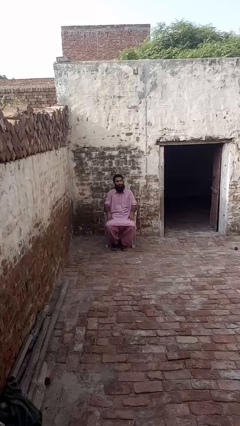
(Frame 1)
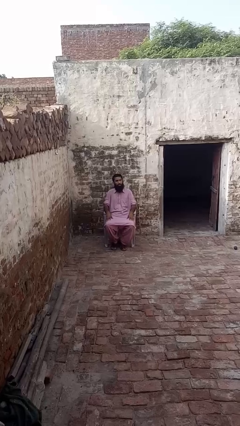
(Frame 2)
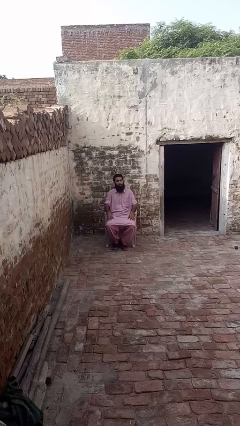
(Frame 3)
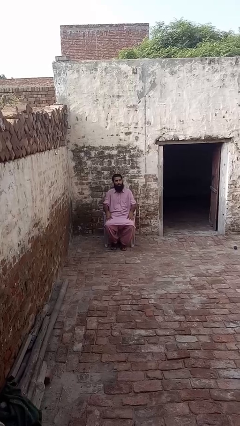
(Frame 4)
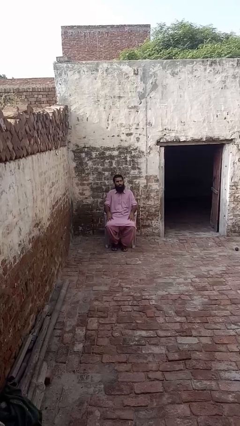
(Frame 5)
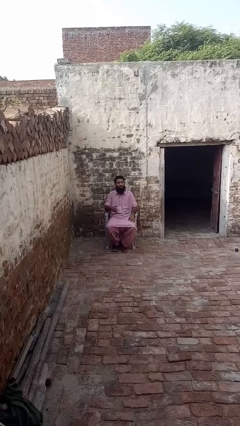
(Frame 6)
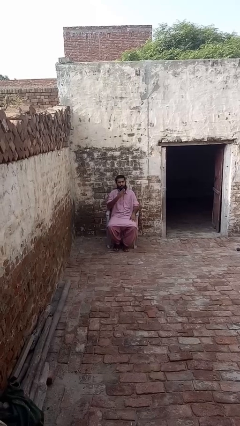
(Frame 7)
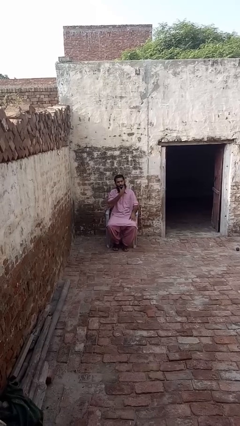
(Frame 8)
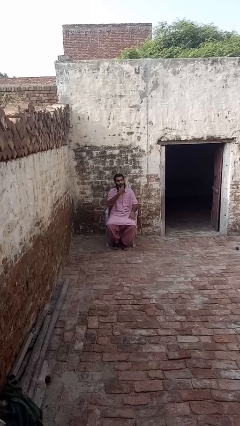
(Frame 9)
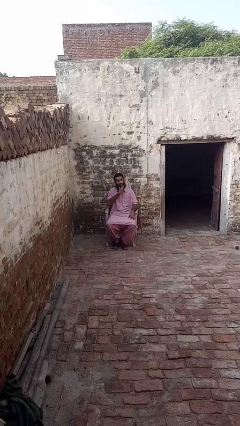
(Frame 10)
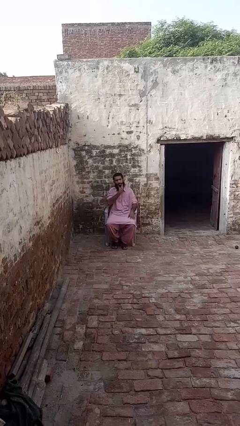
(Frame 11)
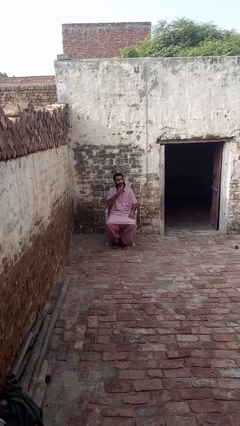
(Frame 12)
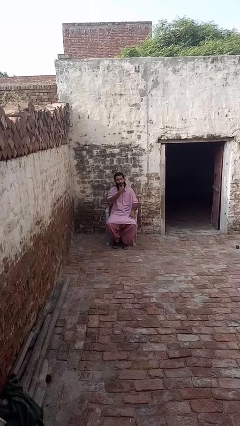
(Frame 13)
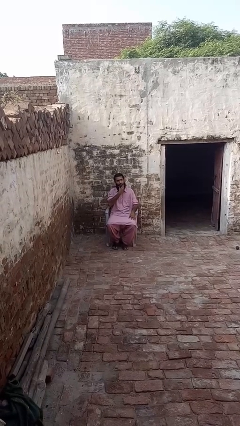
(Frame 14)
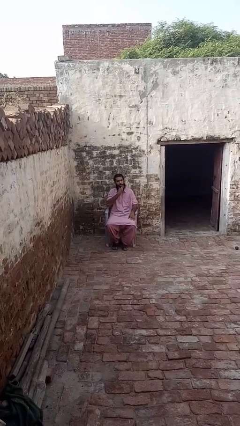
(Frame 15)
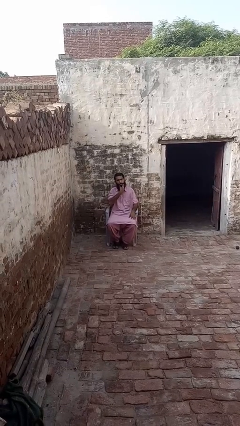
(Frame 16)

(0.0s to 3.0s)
person strokes chin

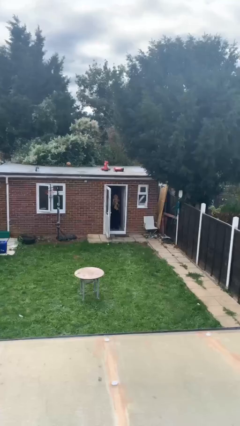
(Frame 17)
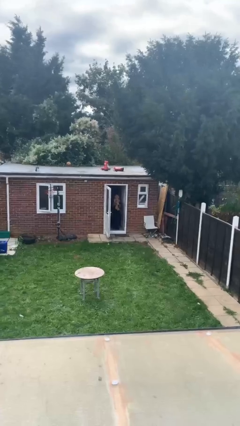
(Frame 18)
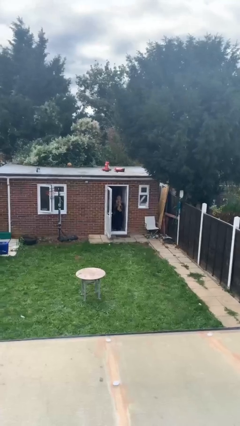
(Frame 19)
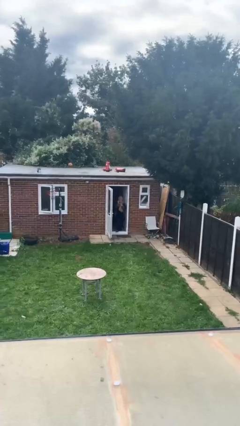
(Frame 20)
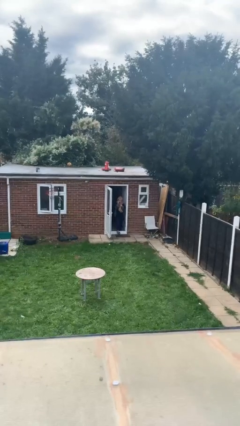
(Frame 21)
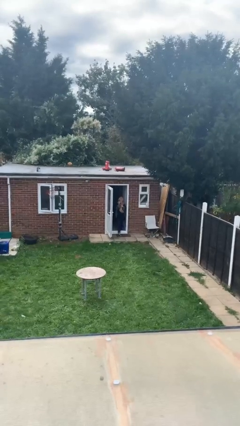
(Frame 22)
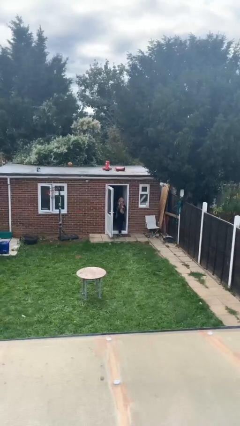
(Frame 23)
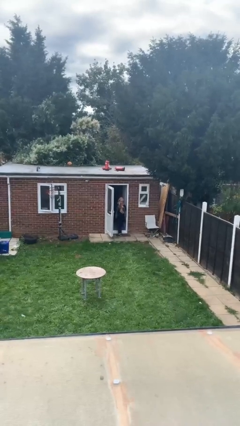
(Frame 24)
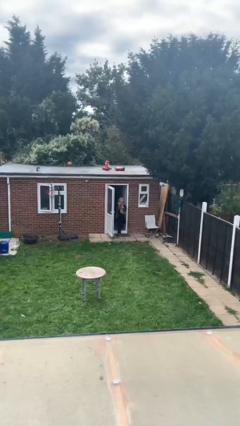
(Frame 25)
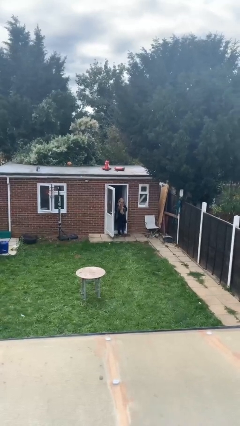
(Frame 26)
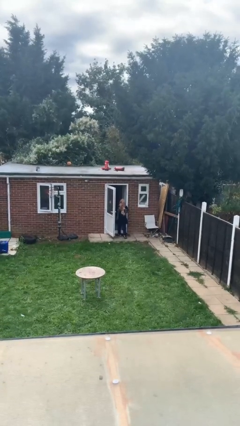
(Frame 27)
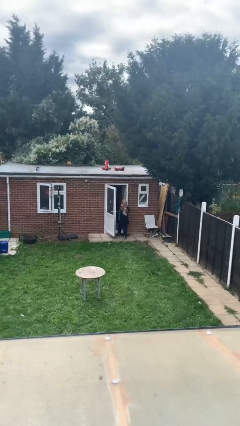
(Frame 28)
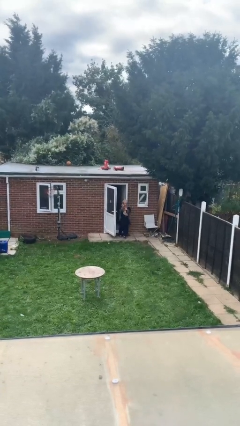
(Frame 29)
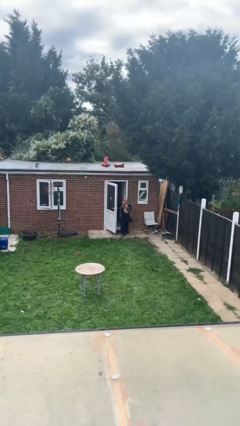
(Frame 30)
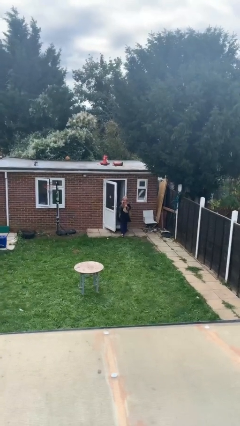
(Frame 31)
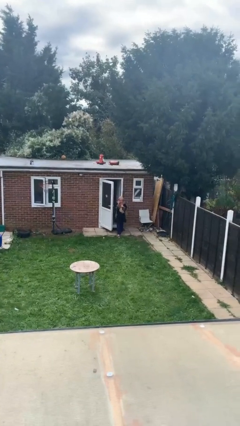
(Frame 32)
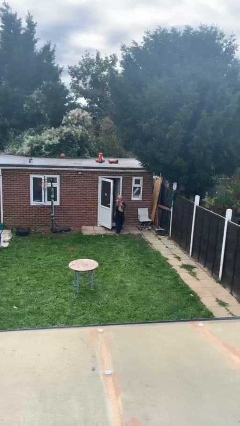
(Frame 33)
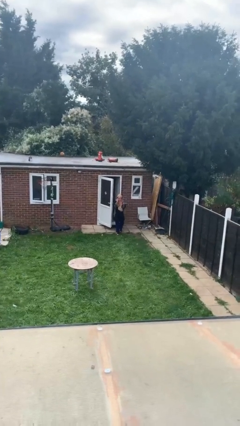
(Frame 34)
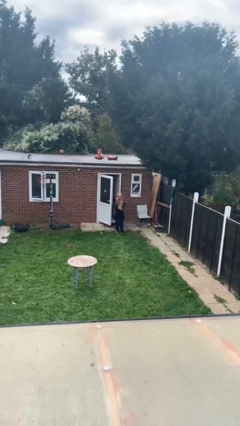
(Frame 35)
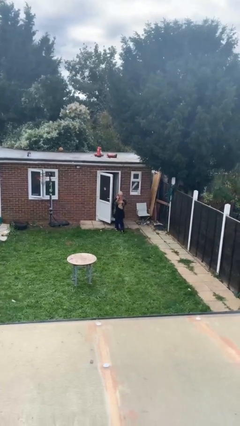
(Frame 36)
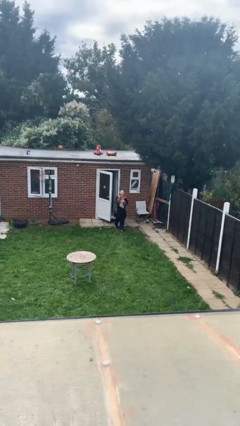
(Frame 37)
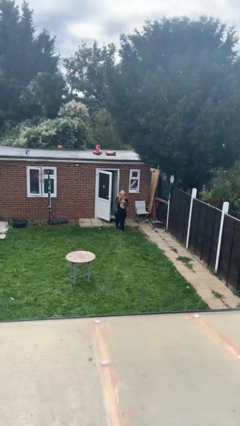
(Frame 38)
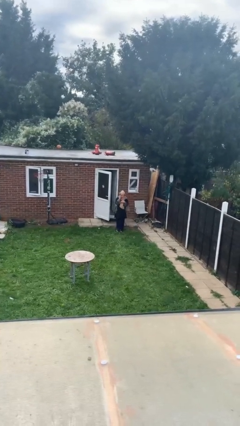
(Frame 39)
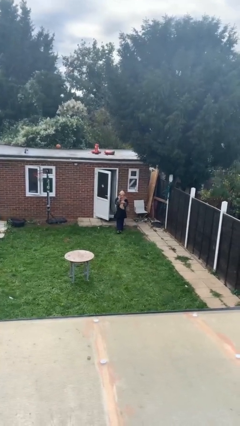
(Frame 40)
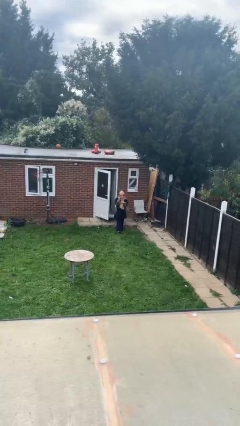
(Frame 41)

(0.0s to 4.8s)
person enters scene through structure

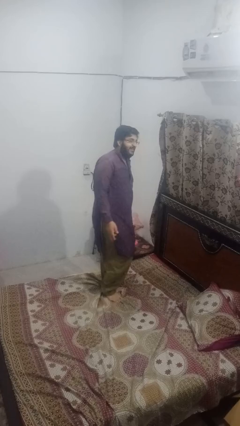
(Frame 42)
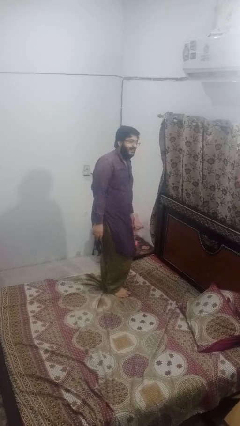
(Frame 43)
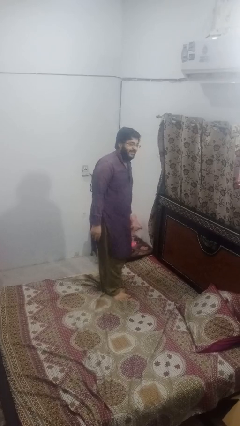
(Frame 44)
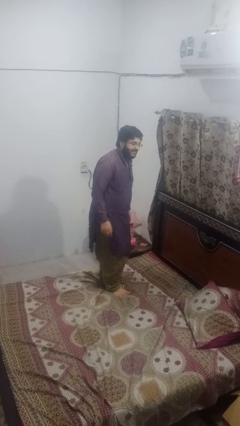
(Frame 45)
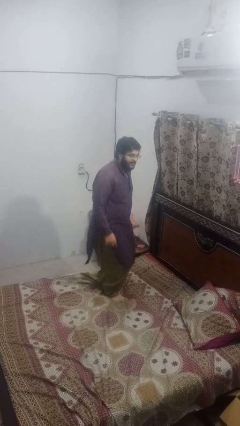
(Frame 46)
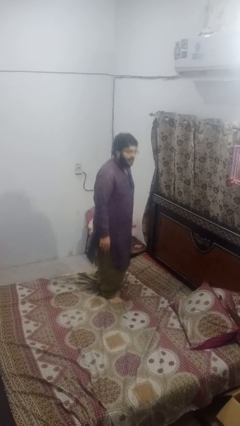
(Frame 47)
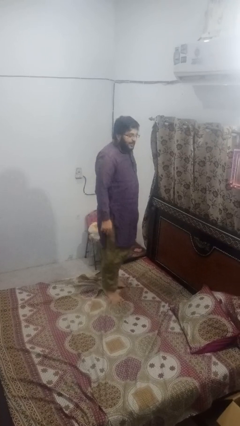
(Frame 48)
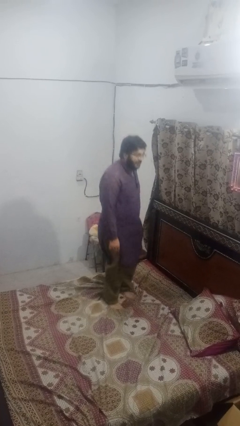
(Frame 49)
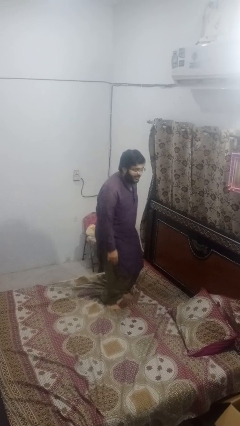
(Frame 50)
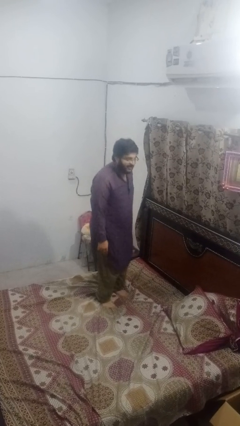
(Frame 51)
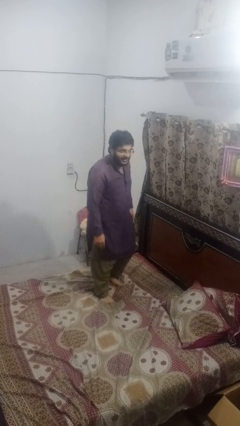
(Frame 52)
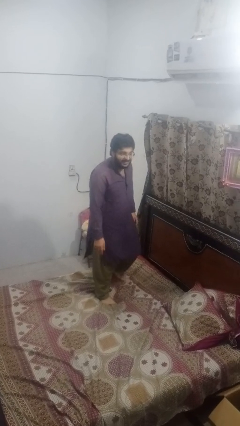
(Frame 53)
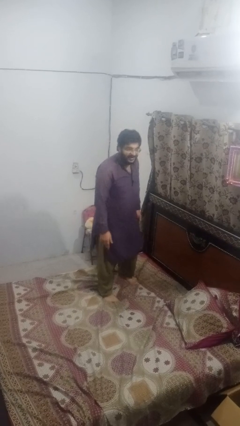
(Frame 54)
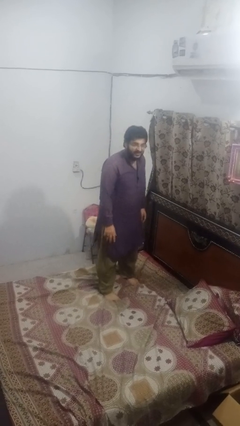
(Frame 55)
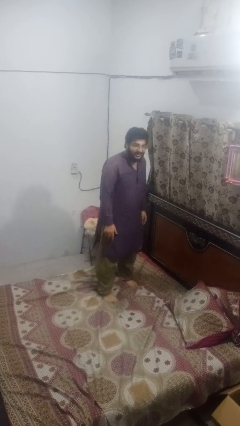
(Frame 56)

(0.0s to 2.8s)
person jumps on bed

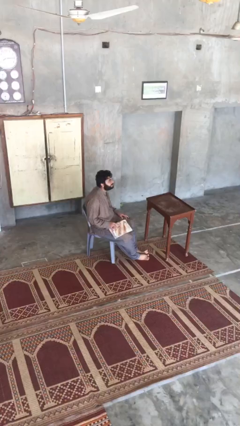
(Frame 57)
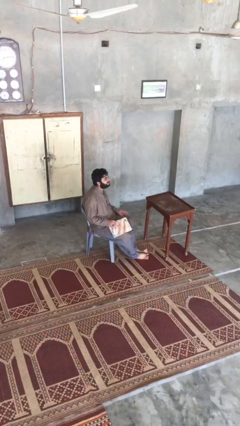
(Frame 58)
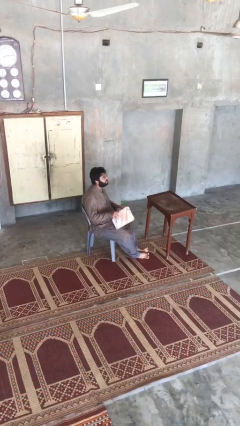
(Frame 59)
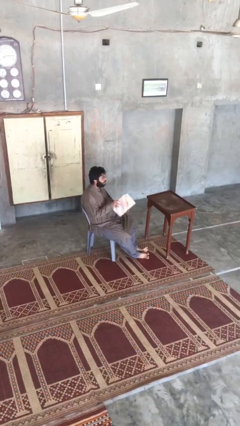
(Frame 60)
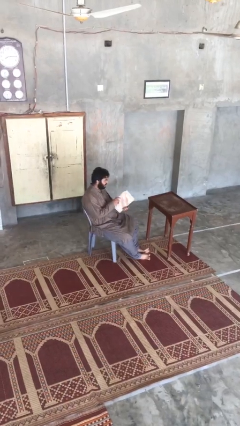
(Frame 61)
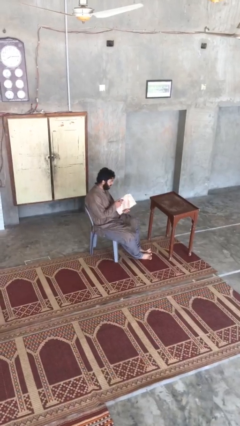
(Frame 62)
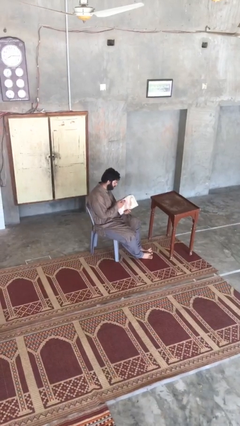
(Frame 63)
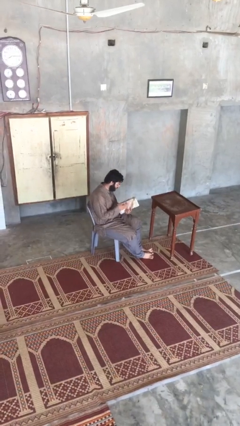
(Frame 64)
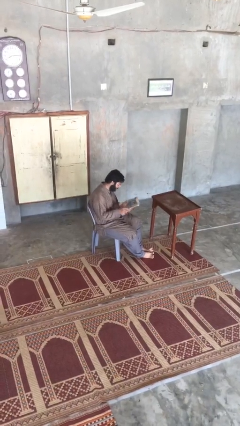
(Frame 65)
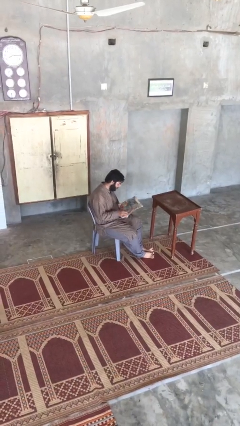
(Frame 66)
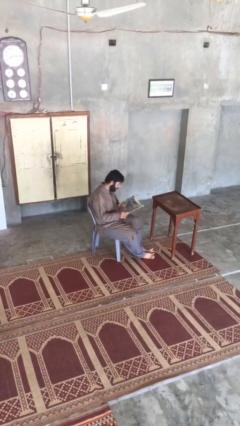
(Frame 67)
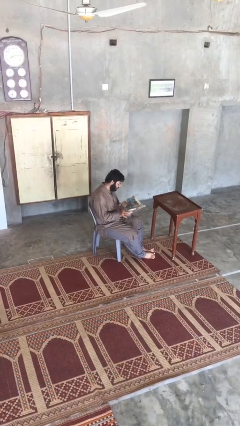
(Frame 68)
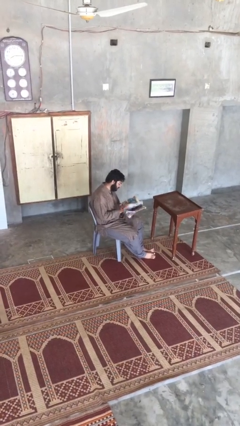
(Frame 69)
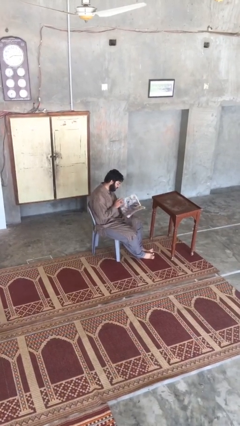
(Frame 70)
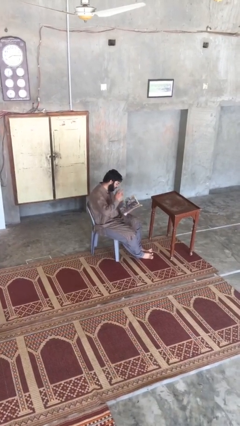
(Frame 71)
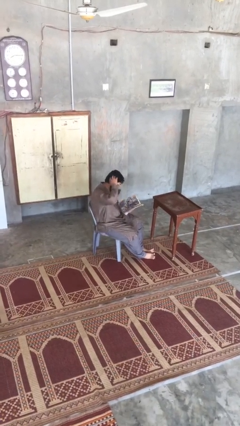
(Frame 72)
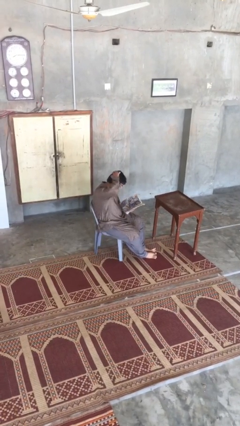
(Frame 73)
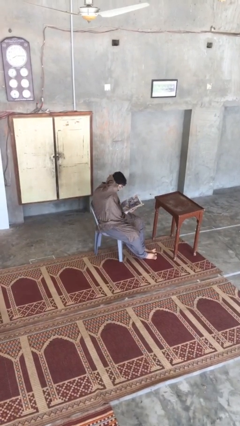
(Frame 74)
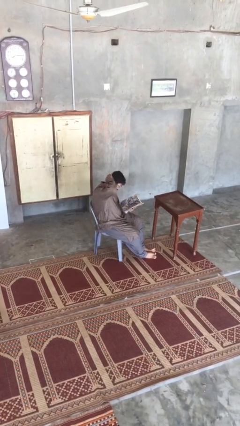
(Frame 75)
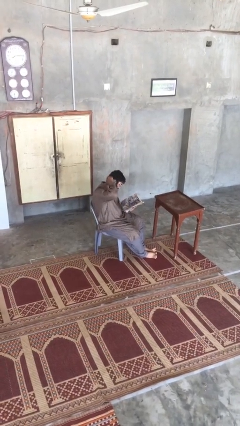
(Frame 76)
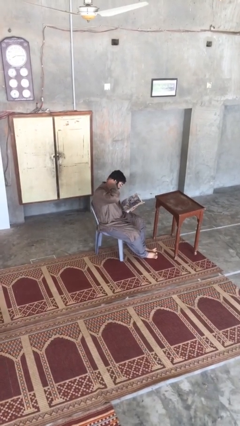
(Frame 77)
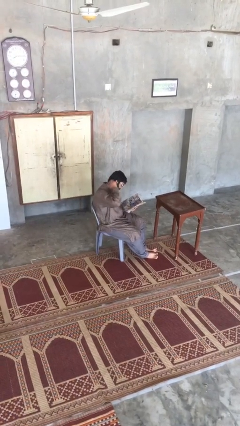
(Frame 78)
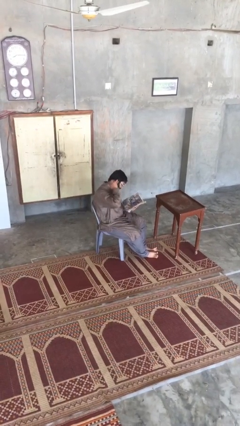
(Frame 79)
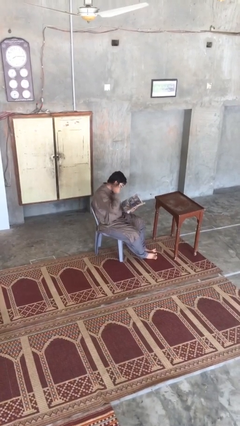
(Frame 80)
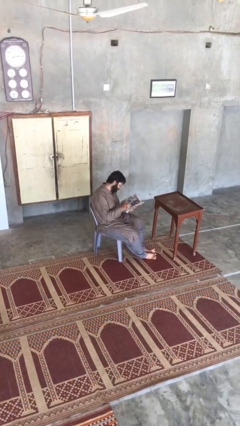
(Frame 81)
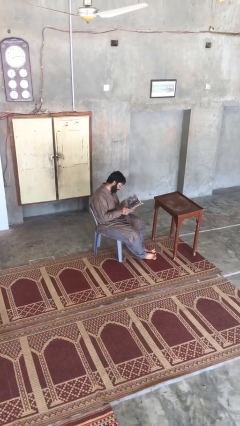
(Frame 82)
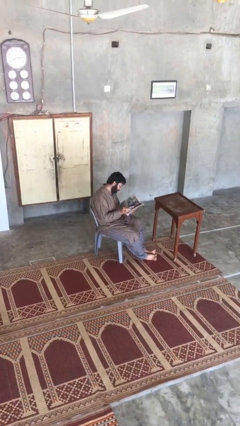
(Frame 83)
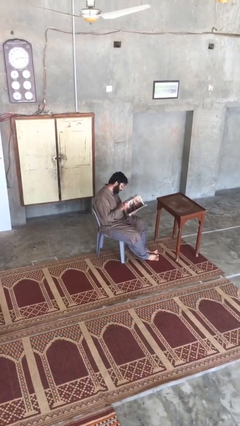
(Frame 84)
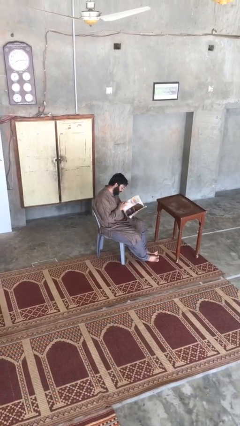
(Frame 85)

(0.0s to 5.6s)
person reads document

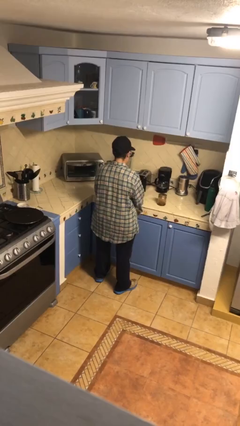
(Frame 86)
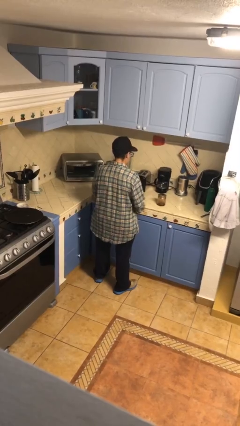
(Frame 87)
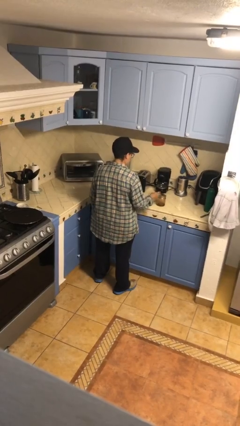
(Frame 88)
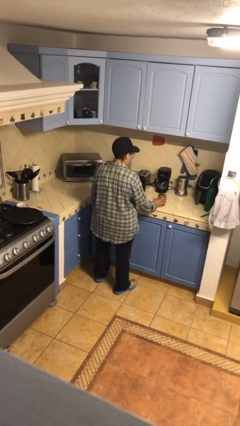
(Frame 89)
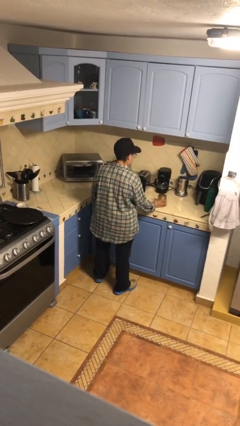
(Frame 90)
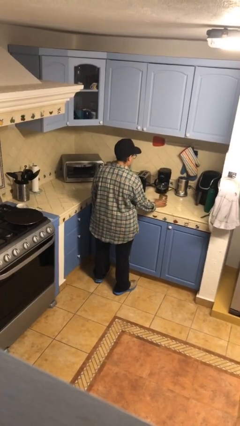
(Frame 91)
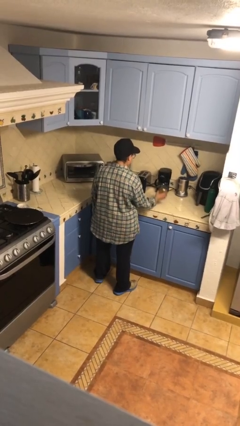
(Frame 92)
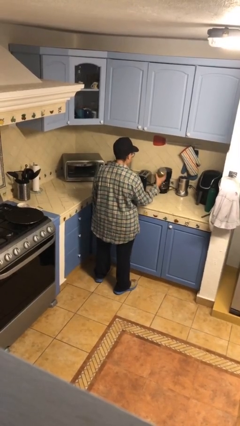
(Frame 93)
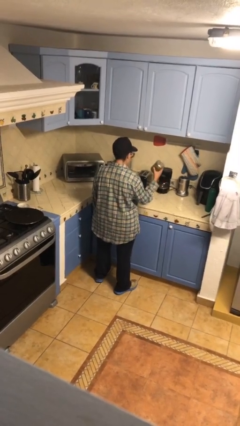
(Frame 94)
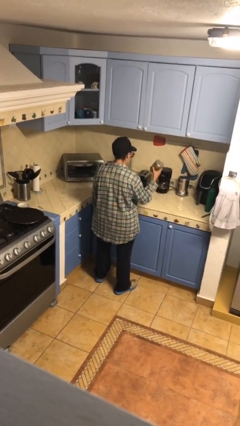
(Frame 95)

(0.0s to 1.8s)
person picks up object from countertop
